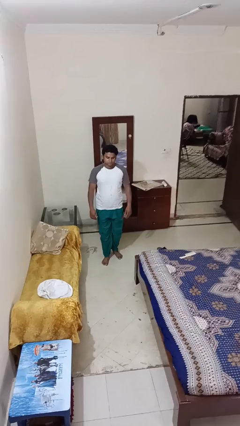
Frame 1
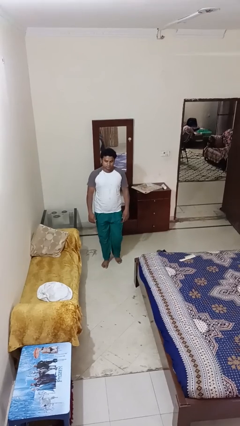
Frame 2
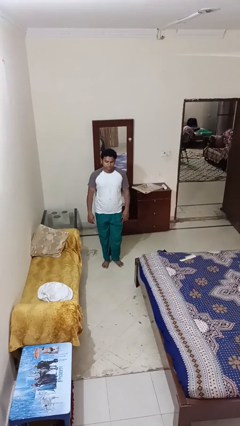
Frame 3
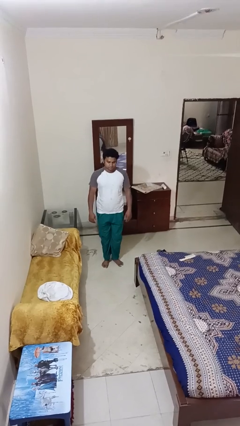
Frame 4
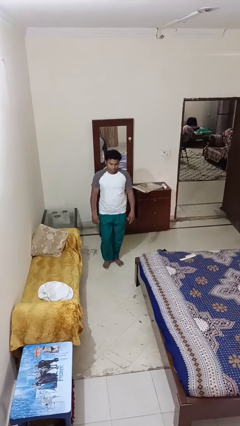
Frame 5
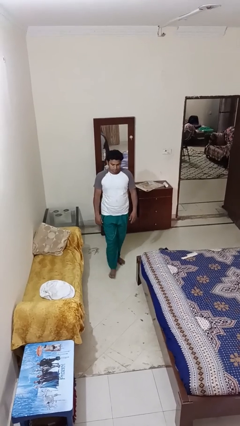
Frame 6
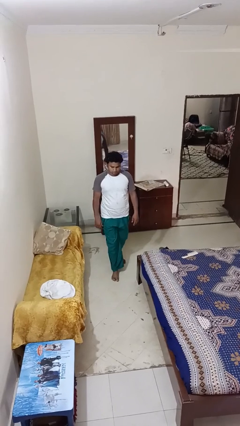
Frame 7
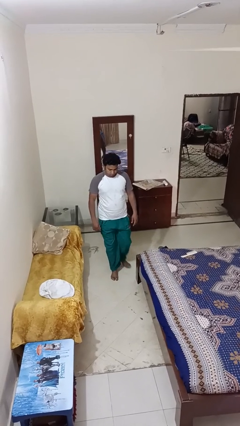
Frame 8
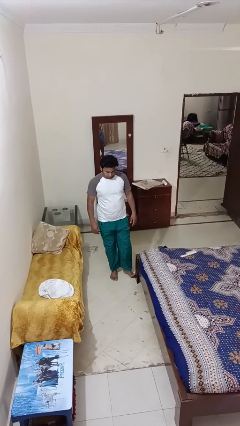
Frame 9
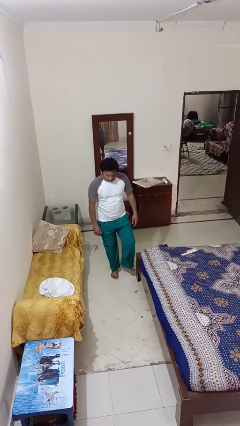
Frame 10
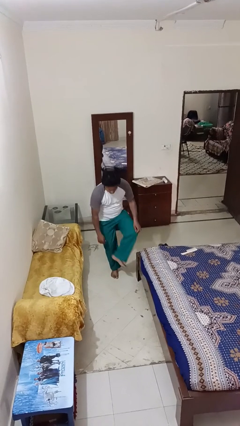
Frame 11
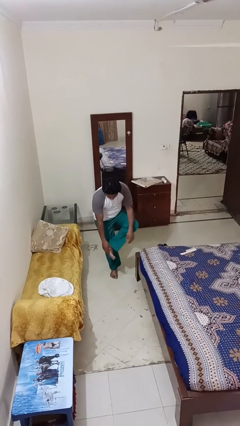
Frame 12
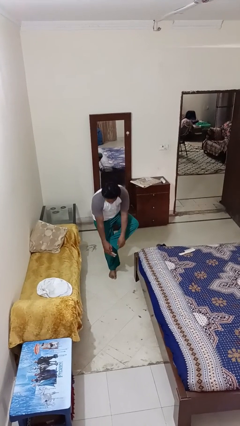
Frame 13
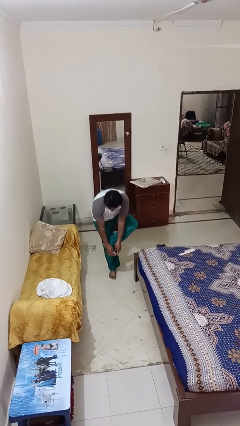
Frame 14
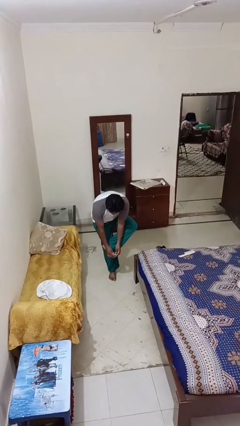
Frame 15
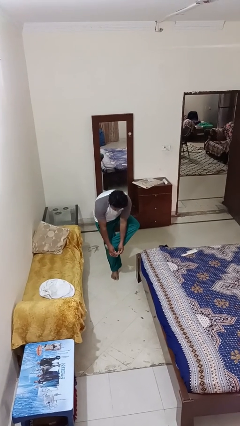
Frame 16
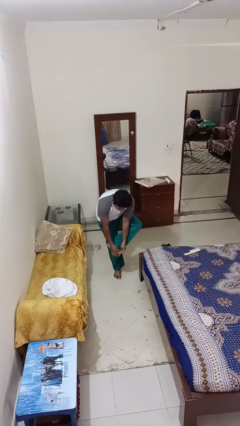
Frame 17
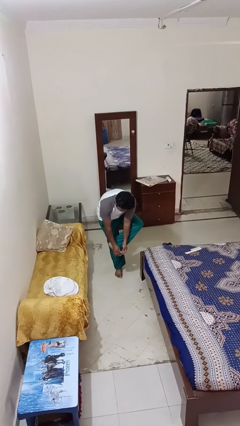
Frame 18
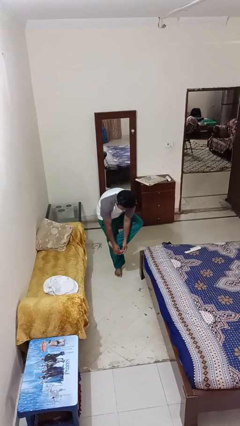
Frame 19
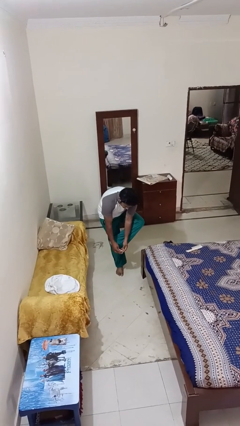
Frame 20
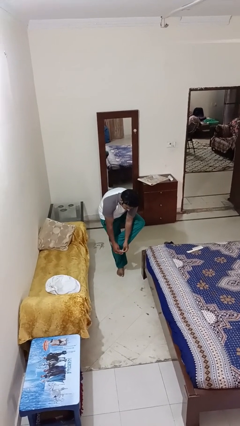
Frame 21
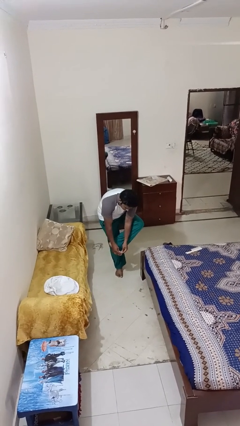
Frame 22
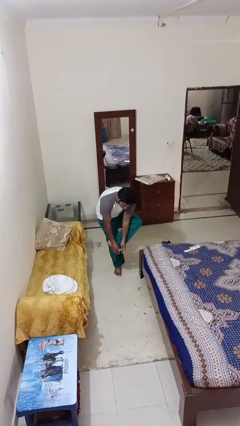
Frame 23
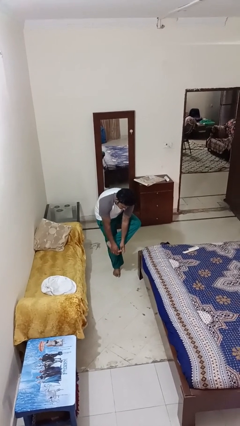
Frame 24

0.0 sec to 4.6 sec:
person stubs toe

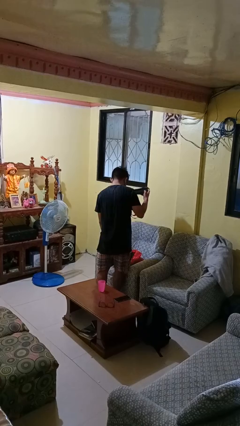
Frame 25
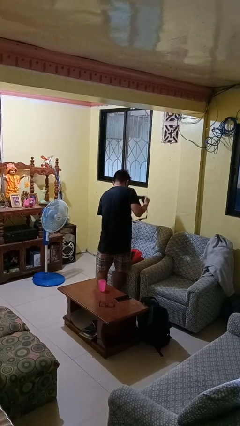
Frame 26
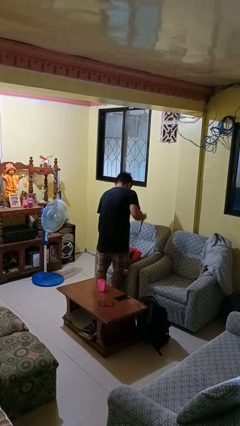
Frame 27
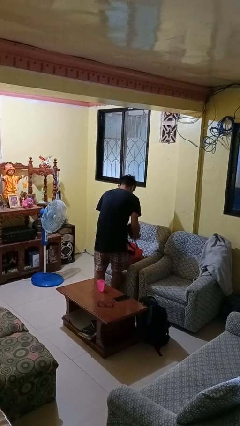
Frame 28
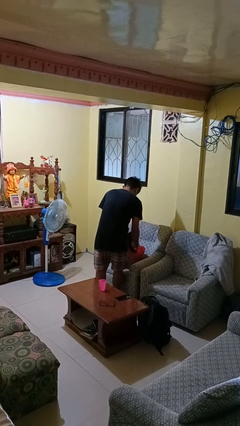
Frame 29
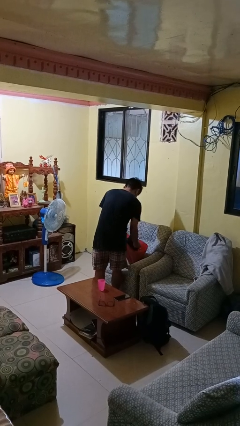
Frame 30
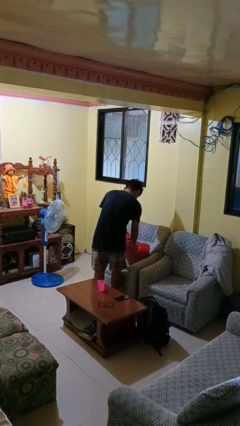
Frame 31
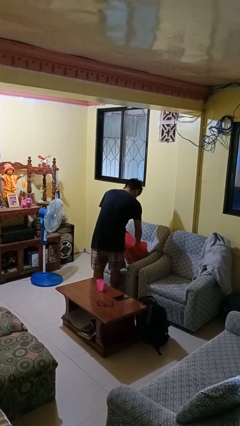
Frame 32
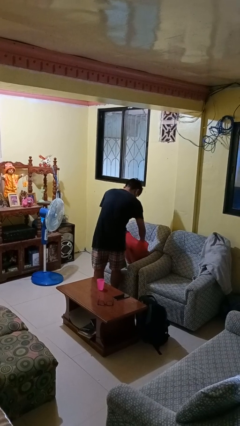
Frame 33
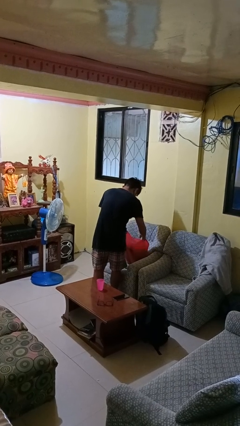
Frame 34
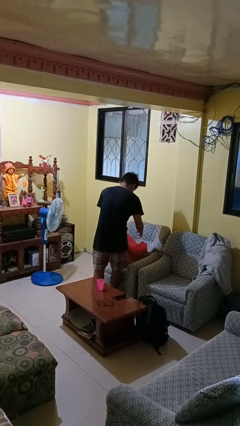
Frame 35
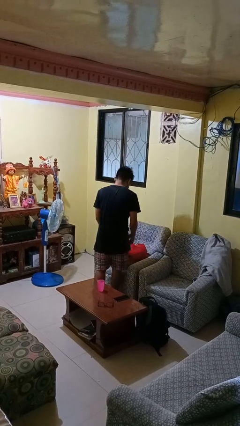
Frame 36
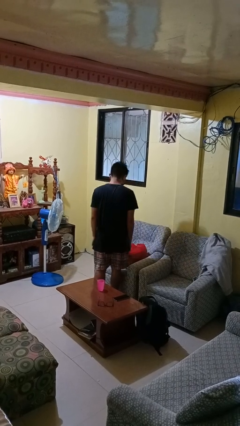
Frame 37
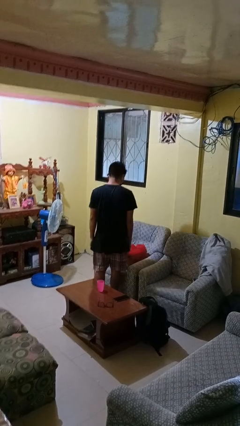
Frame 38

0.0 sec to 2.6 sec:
person puts object into bag

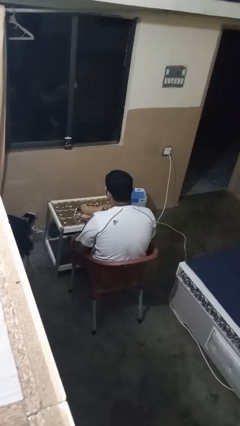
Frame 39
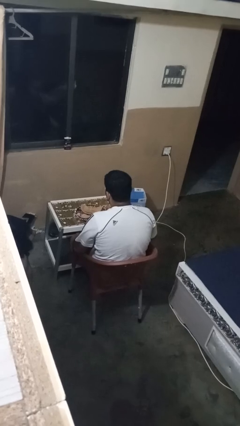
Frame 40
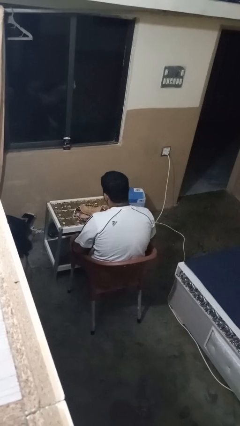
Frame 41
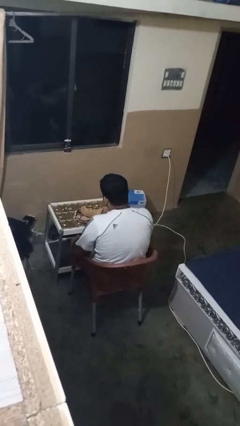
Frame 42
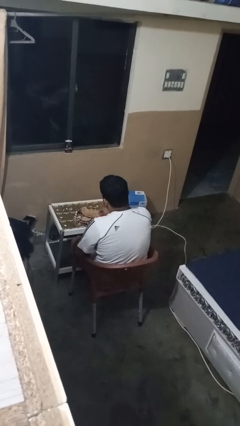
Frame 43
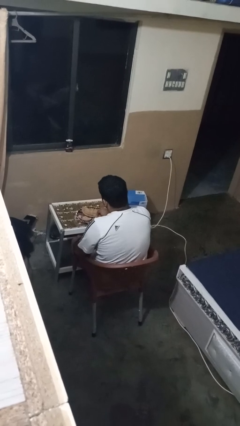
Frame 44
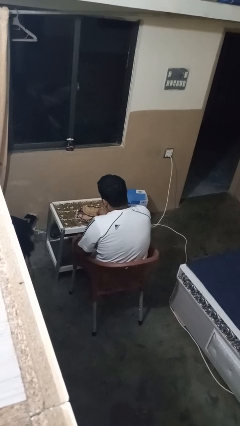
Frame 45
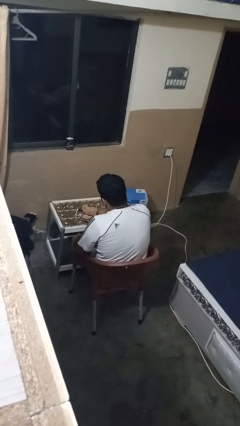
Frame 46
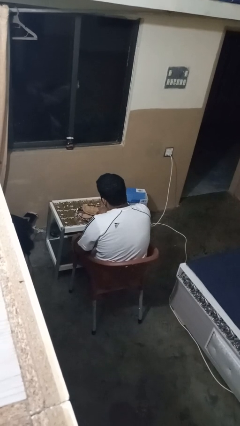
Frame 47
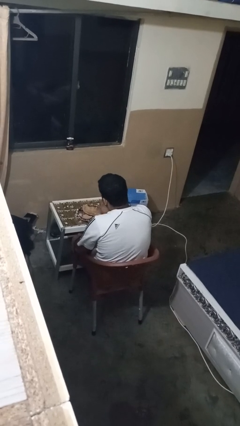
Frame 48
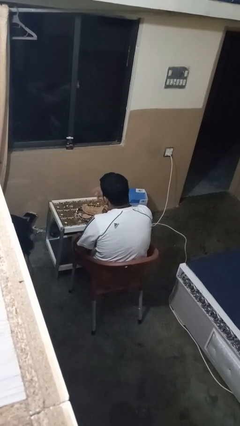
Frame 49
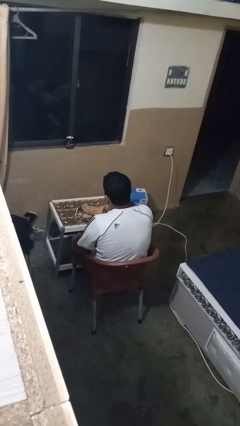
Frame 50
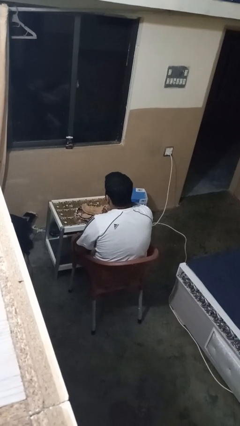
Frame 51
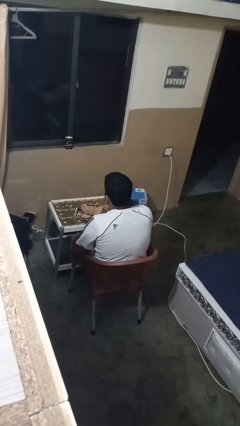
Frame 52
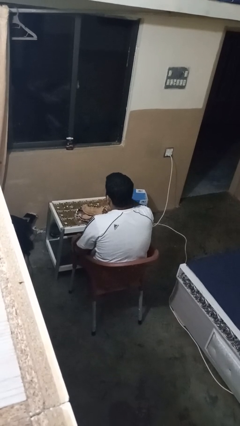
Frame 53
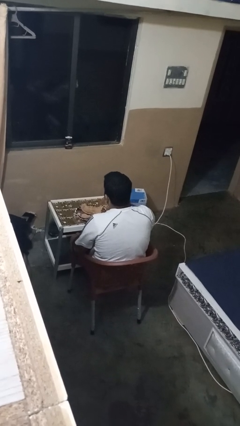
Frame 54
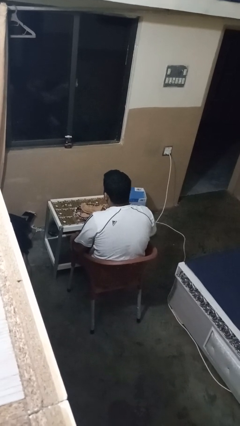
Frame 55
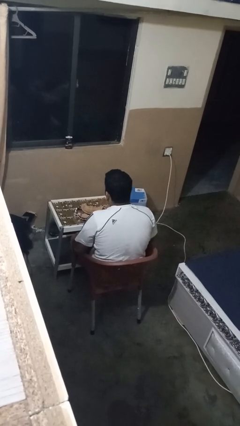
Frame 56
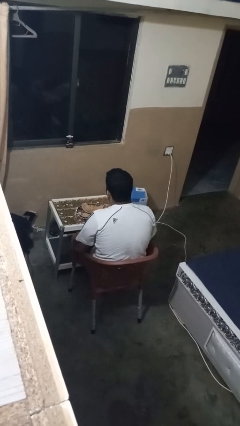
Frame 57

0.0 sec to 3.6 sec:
person eats with hands

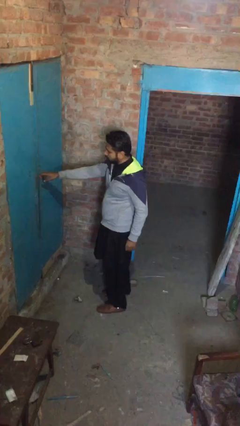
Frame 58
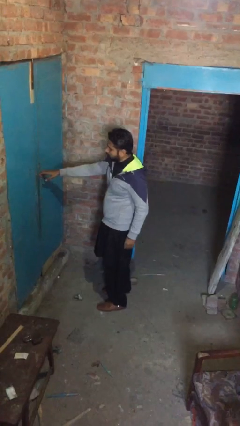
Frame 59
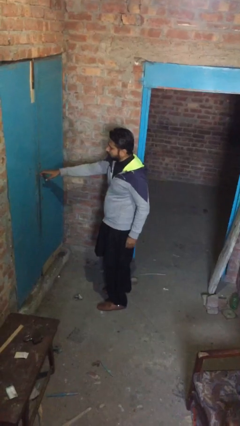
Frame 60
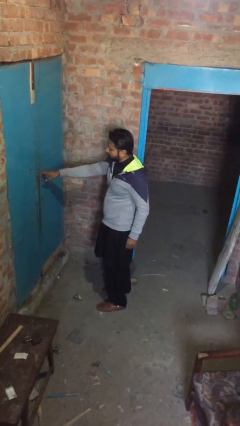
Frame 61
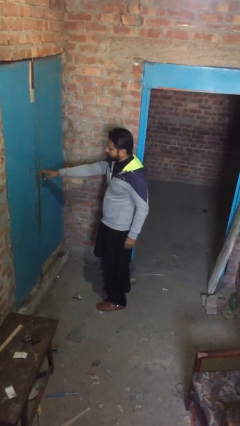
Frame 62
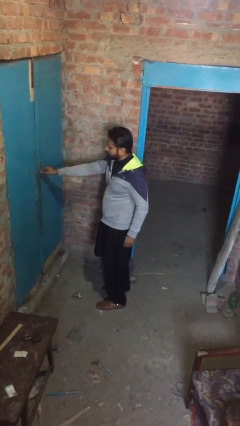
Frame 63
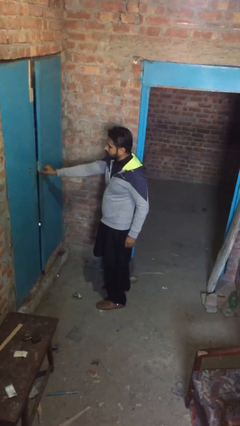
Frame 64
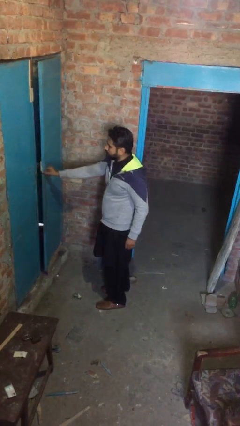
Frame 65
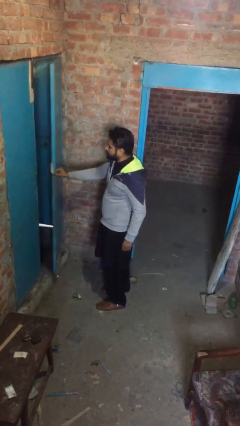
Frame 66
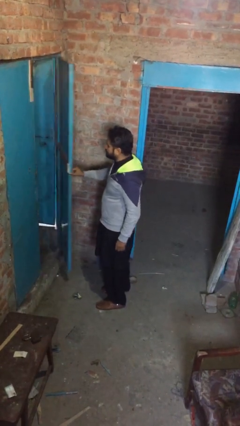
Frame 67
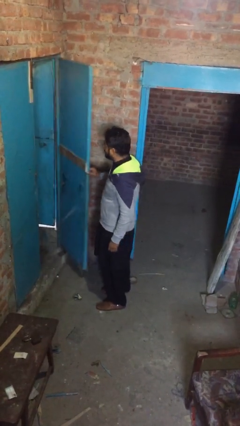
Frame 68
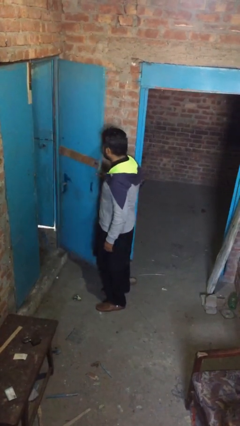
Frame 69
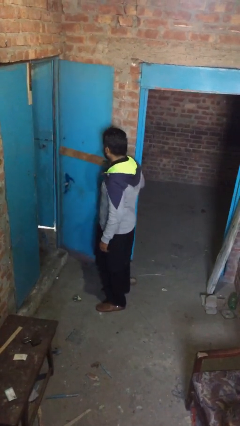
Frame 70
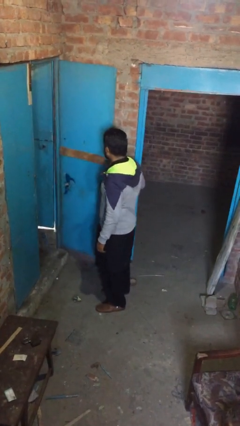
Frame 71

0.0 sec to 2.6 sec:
person opens facility door

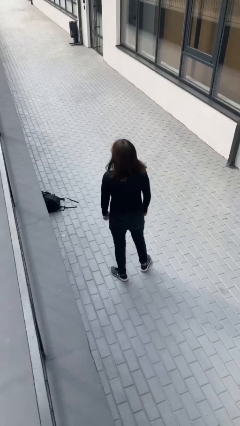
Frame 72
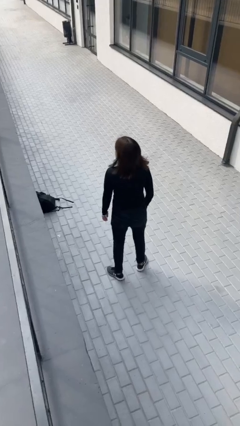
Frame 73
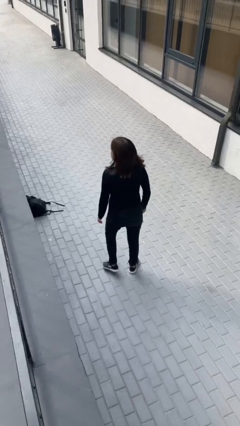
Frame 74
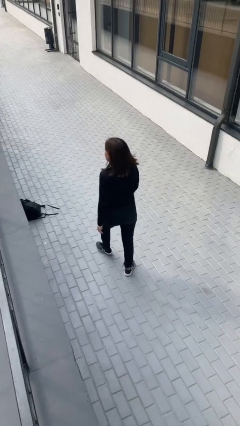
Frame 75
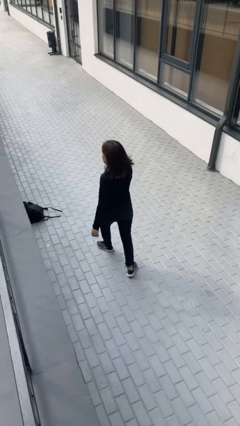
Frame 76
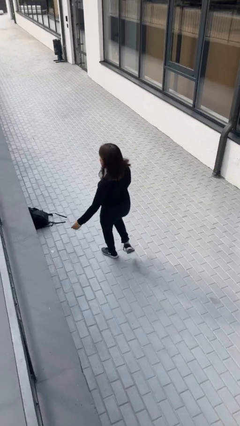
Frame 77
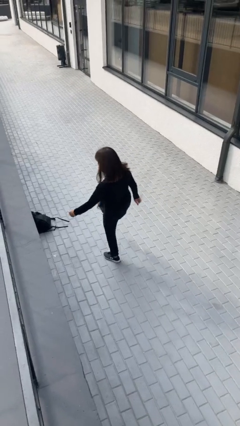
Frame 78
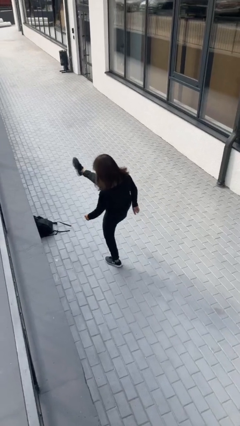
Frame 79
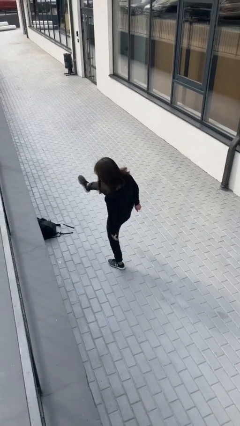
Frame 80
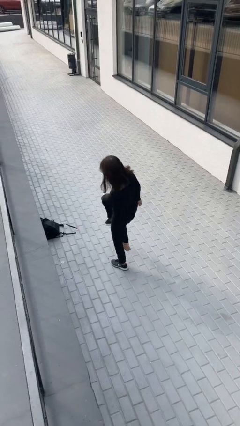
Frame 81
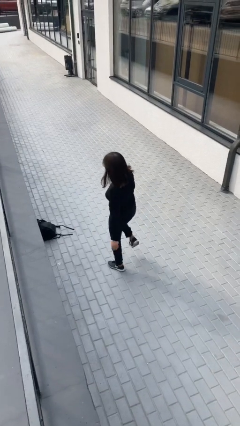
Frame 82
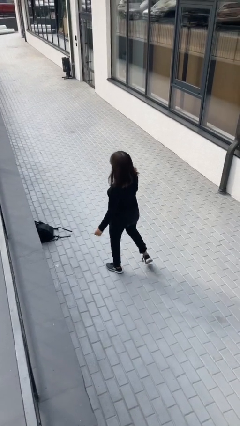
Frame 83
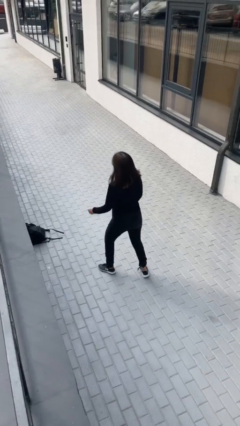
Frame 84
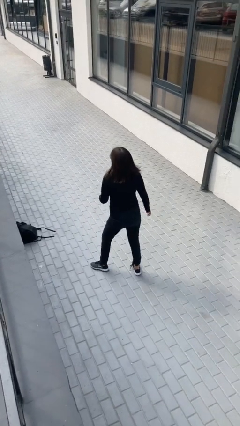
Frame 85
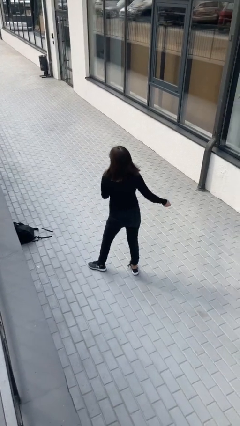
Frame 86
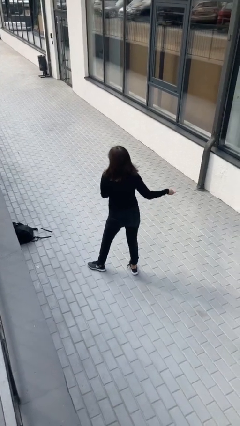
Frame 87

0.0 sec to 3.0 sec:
person karate kicks

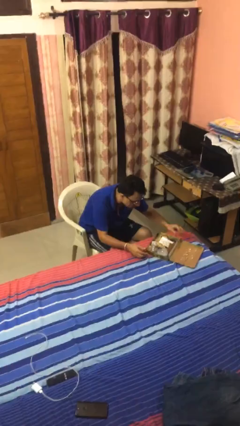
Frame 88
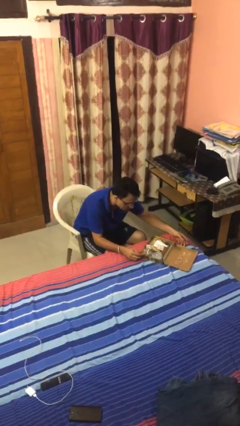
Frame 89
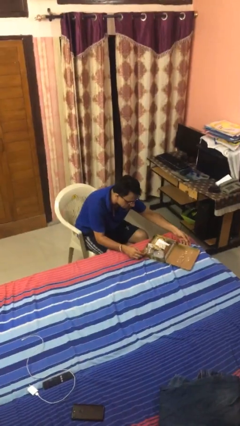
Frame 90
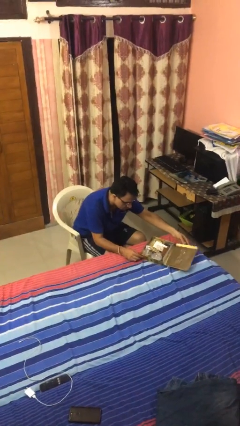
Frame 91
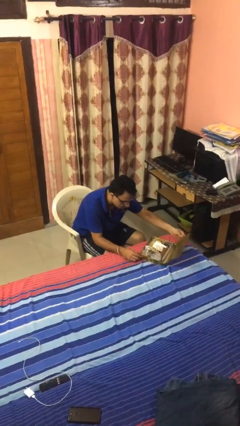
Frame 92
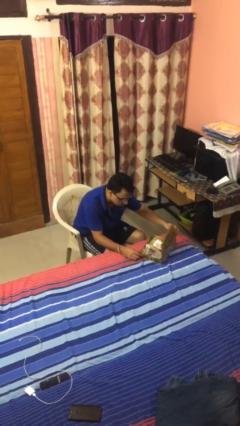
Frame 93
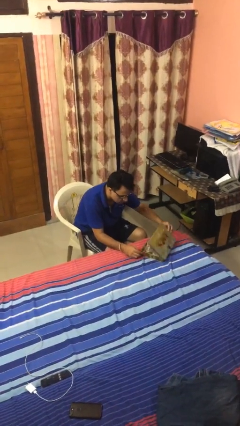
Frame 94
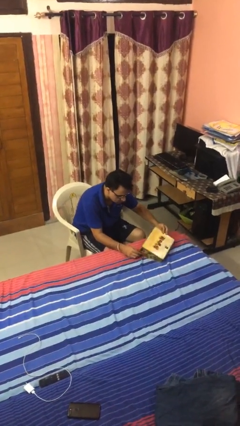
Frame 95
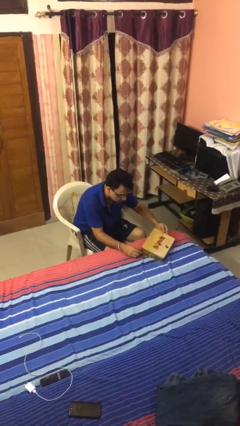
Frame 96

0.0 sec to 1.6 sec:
person closes jewelry box
